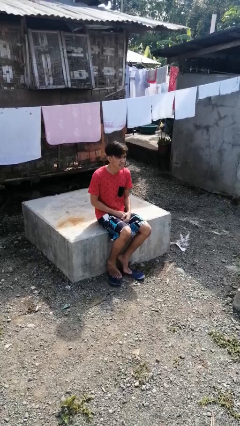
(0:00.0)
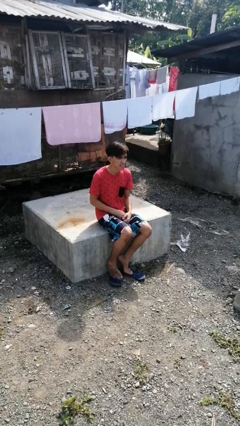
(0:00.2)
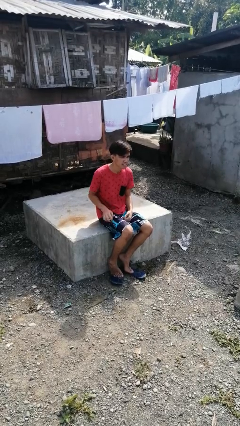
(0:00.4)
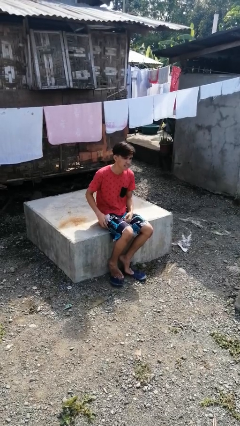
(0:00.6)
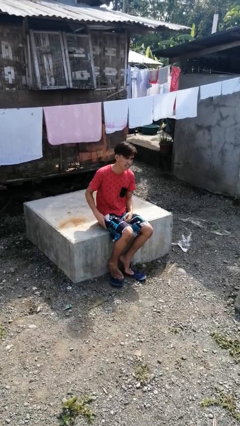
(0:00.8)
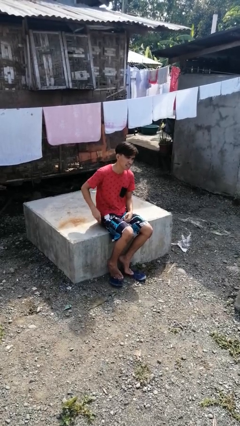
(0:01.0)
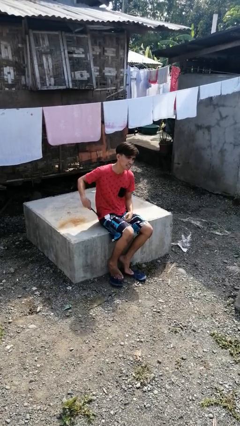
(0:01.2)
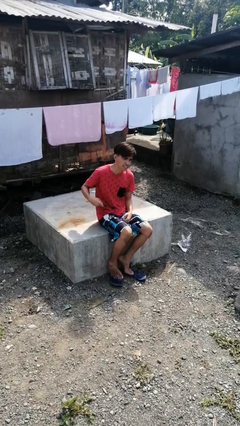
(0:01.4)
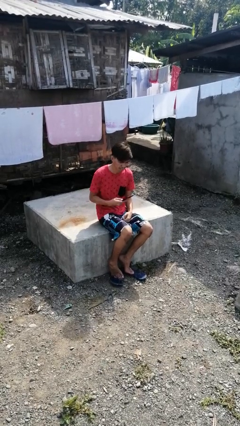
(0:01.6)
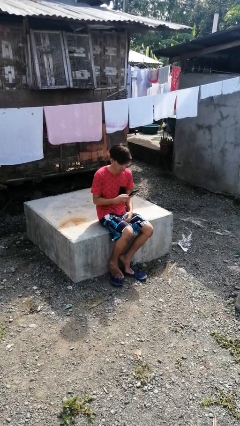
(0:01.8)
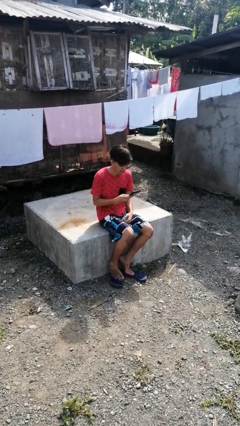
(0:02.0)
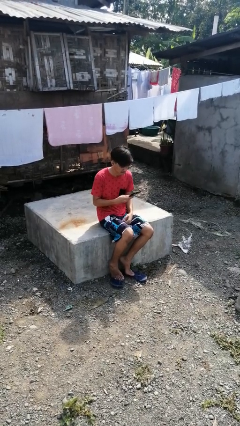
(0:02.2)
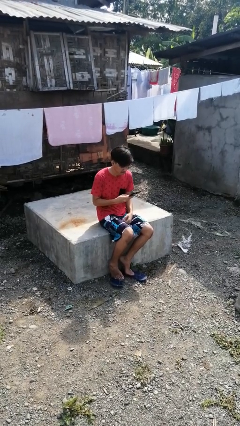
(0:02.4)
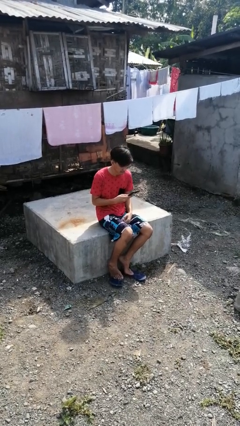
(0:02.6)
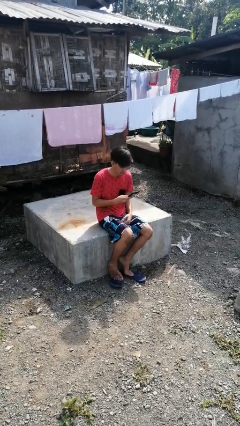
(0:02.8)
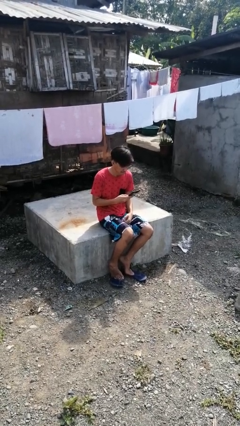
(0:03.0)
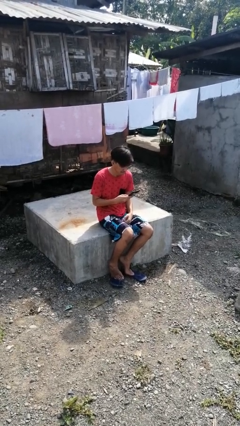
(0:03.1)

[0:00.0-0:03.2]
person takes phone from pocket

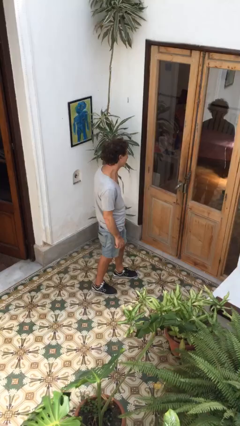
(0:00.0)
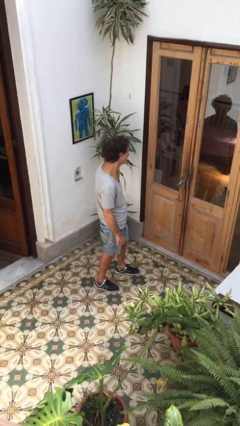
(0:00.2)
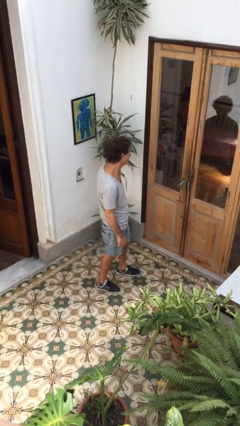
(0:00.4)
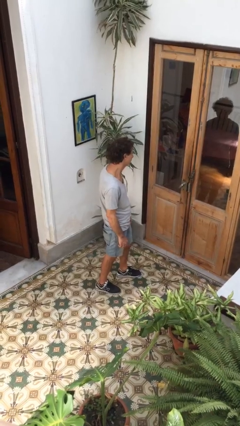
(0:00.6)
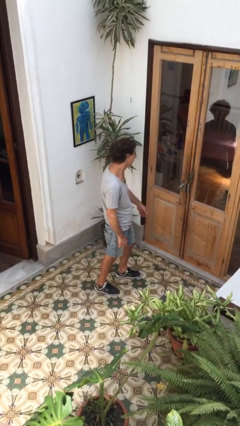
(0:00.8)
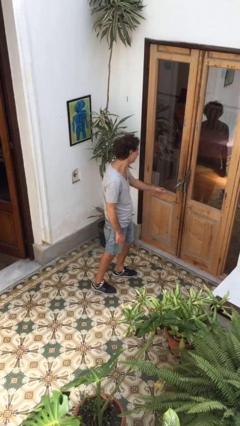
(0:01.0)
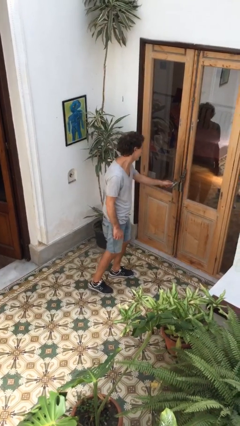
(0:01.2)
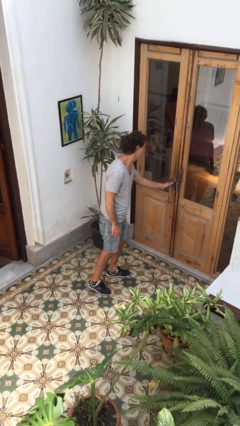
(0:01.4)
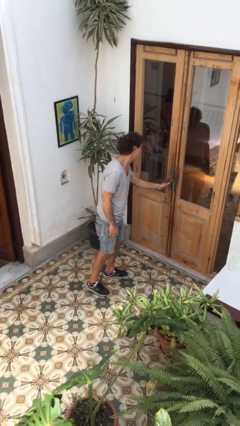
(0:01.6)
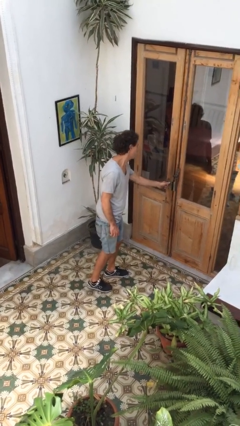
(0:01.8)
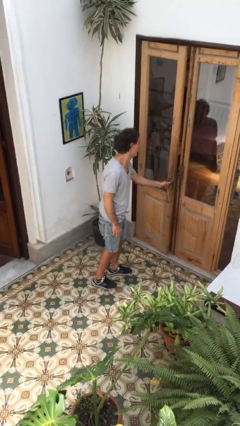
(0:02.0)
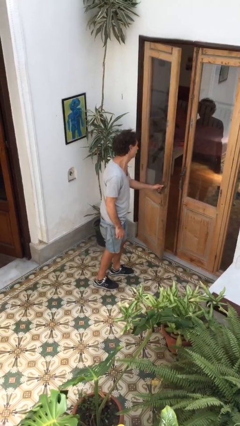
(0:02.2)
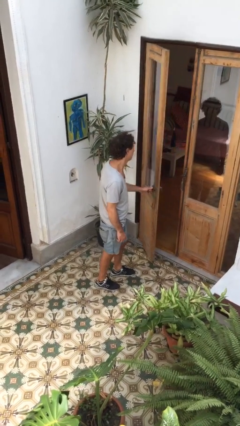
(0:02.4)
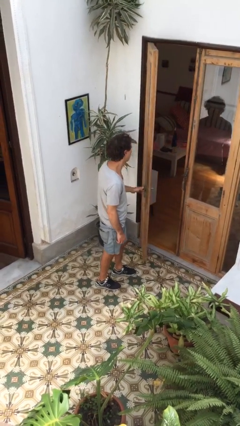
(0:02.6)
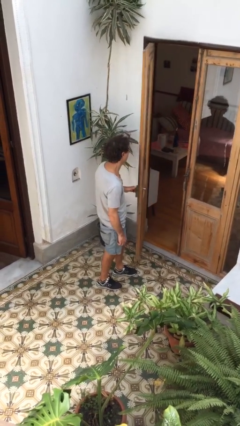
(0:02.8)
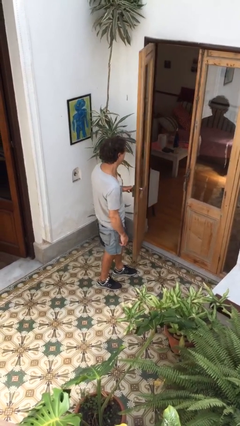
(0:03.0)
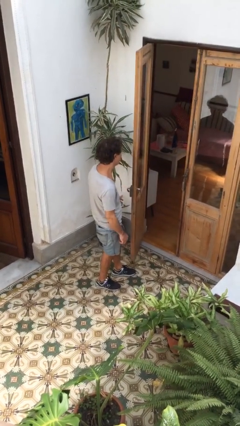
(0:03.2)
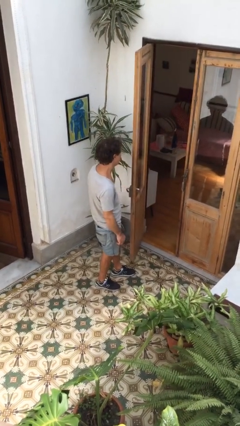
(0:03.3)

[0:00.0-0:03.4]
person opens facility door

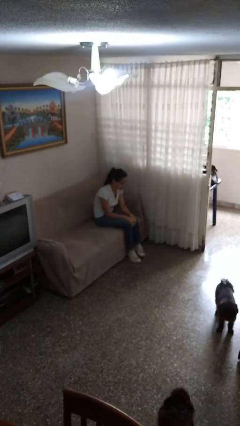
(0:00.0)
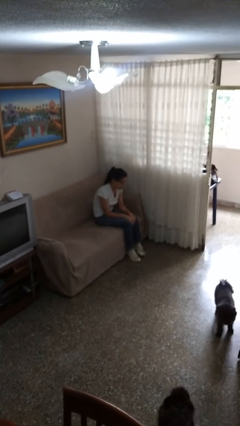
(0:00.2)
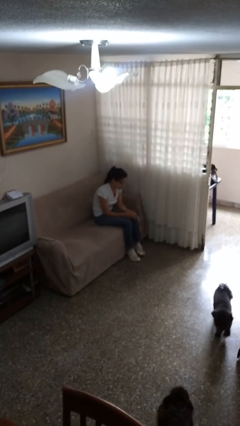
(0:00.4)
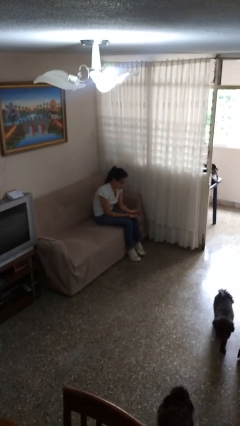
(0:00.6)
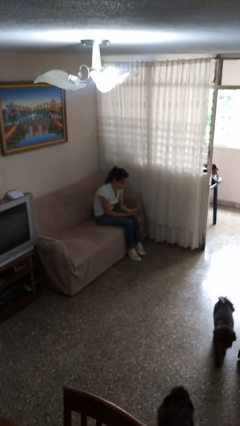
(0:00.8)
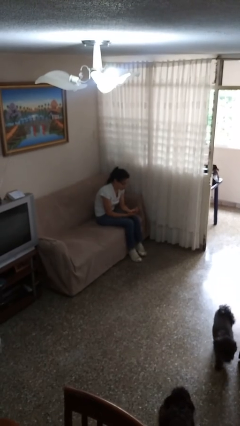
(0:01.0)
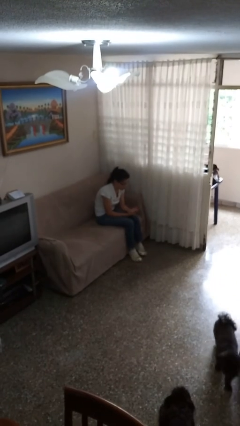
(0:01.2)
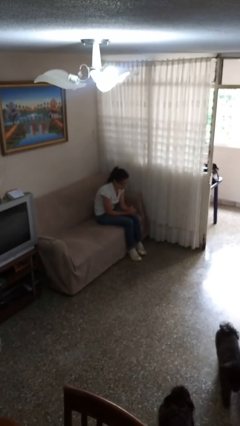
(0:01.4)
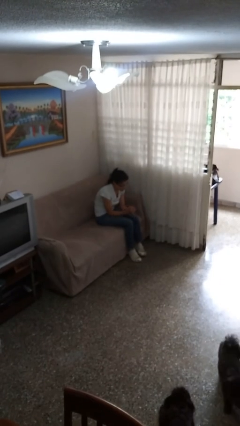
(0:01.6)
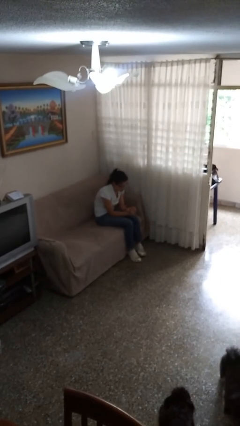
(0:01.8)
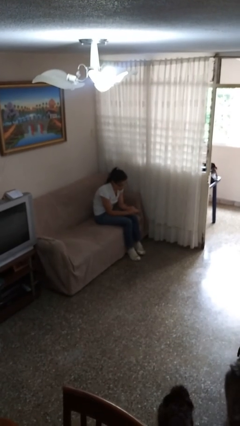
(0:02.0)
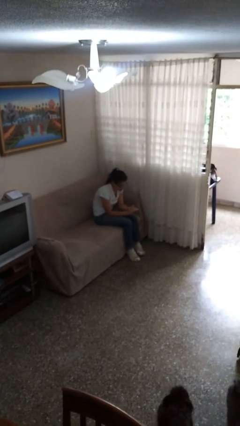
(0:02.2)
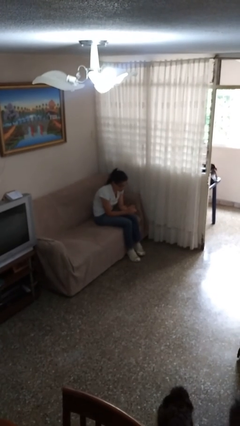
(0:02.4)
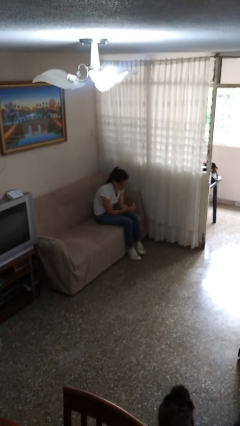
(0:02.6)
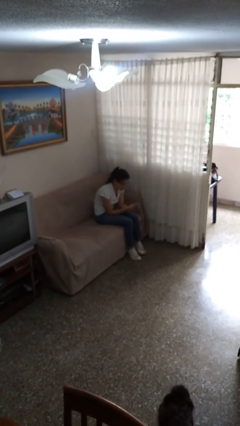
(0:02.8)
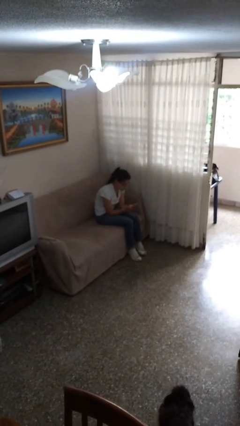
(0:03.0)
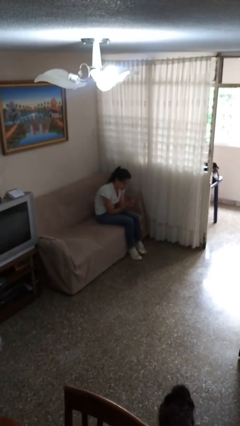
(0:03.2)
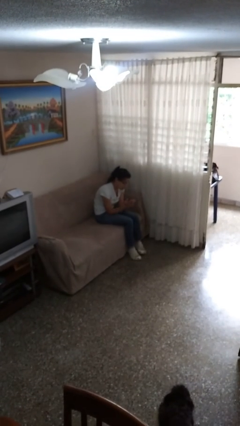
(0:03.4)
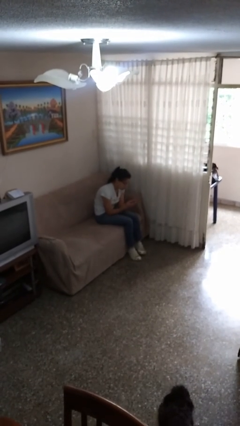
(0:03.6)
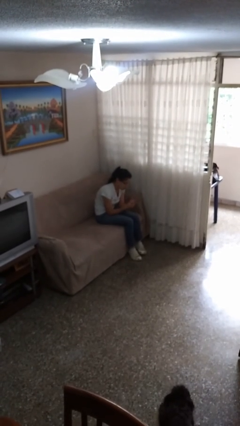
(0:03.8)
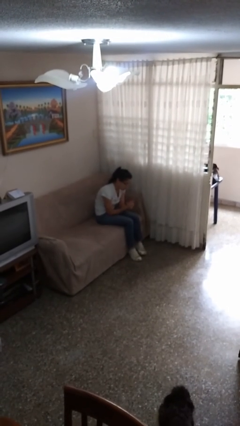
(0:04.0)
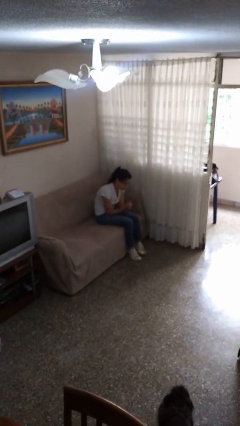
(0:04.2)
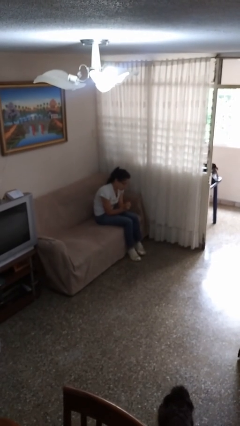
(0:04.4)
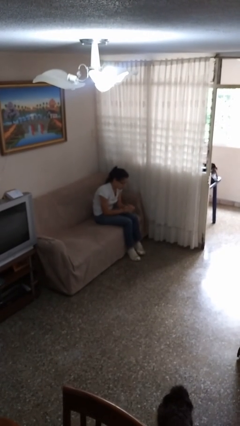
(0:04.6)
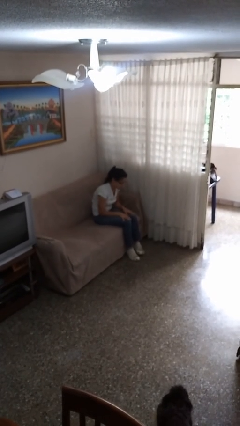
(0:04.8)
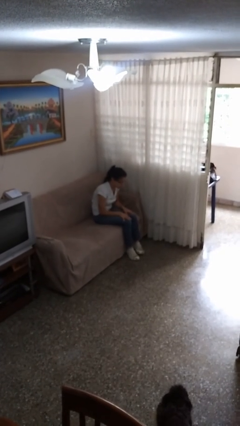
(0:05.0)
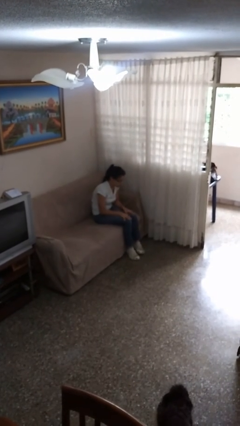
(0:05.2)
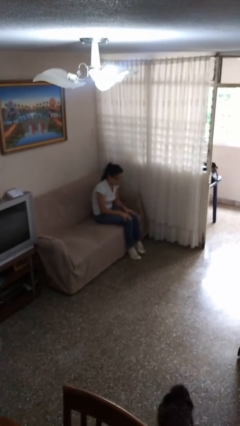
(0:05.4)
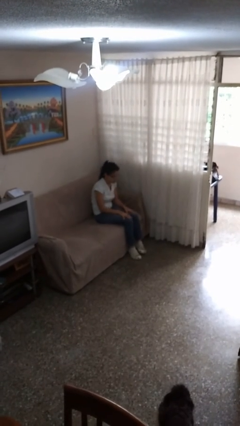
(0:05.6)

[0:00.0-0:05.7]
person looks at hands in lap

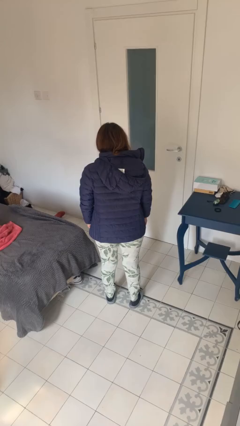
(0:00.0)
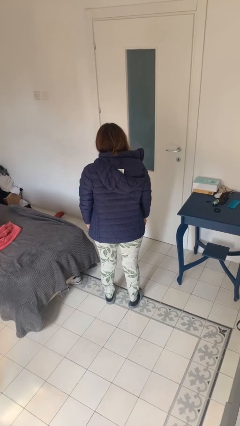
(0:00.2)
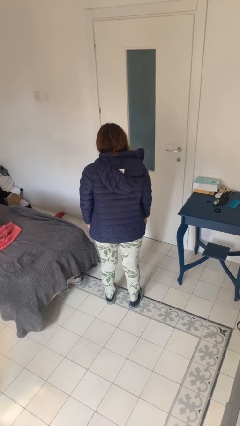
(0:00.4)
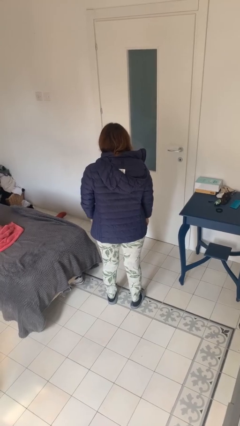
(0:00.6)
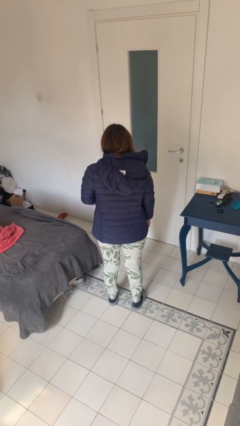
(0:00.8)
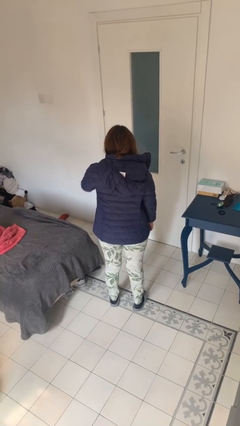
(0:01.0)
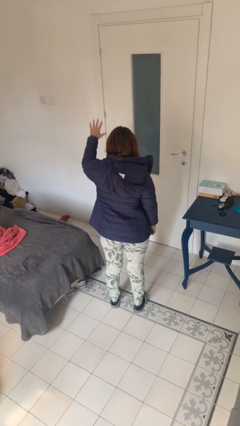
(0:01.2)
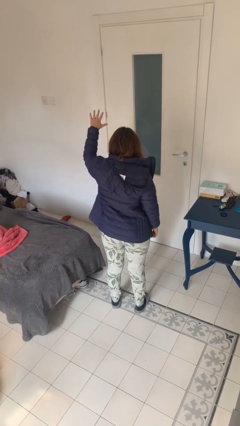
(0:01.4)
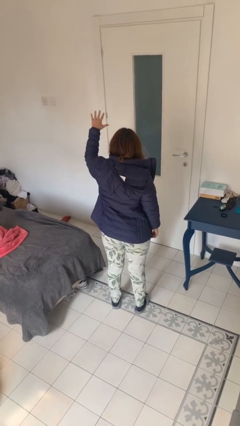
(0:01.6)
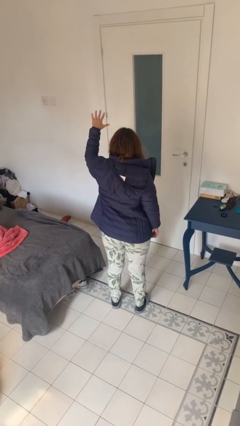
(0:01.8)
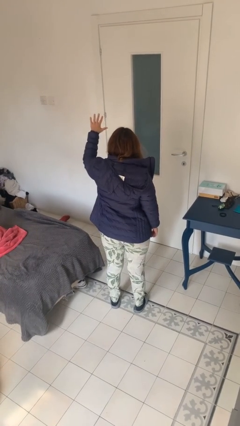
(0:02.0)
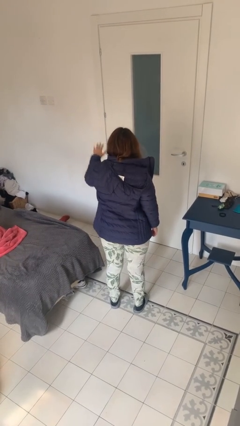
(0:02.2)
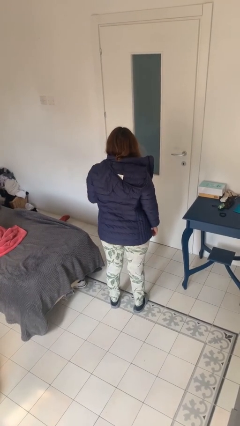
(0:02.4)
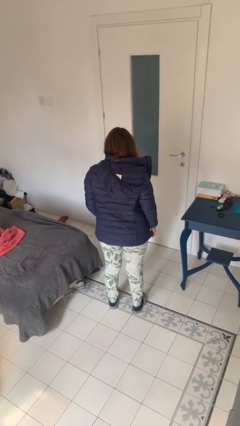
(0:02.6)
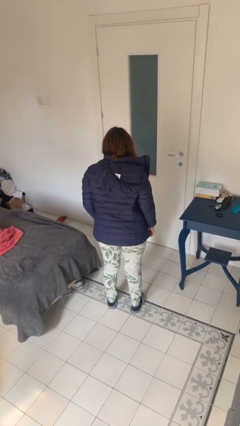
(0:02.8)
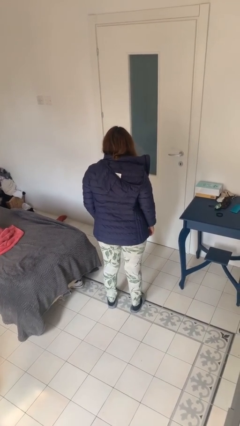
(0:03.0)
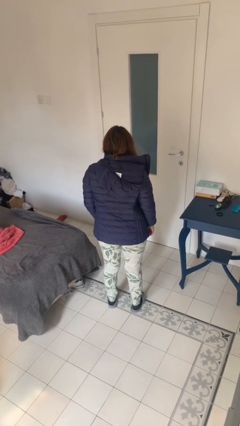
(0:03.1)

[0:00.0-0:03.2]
person gestures number five

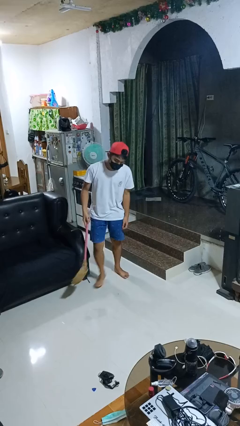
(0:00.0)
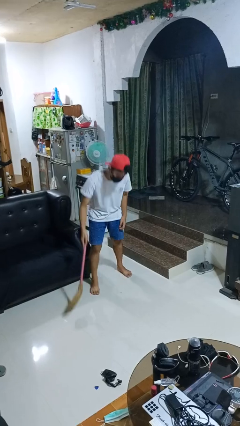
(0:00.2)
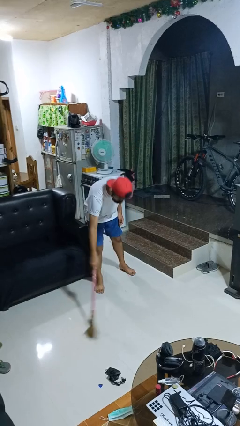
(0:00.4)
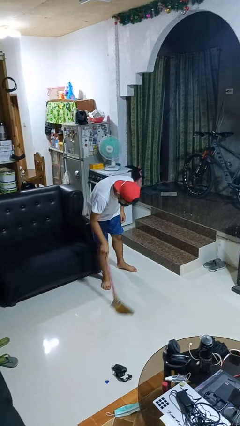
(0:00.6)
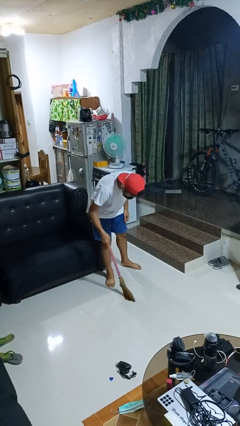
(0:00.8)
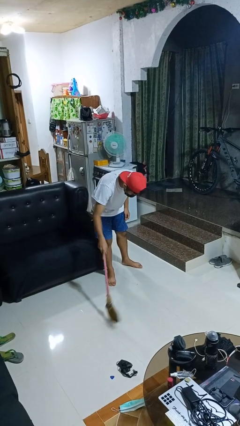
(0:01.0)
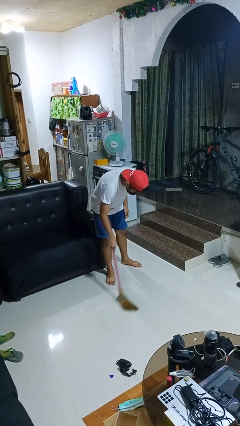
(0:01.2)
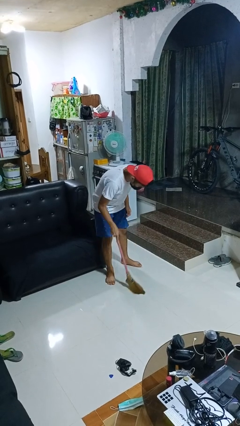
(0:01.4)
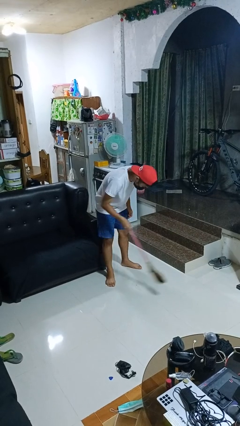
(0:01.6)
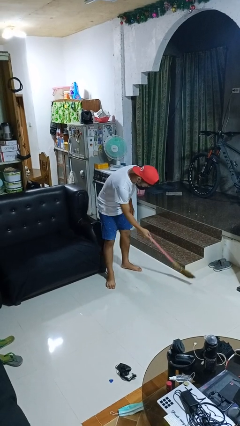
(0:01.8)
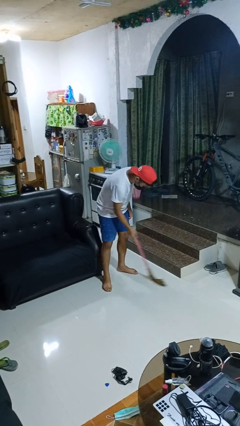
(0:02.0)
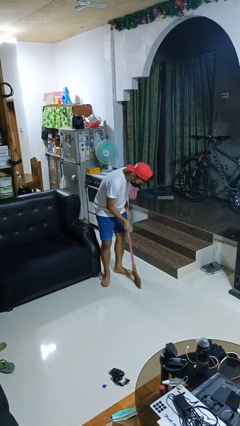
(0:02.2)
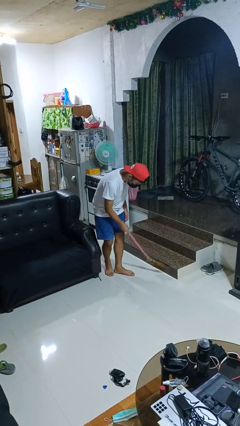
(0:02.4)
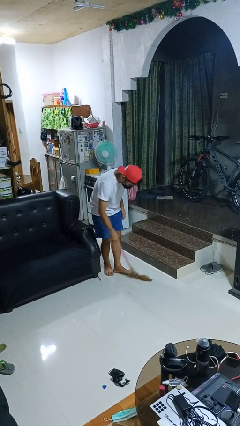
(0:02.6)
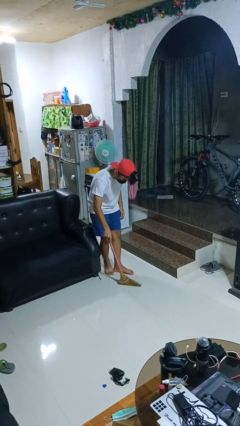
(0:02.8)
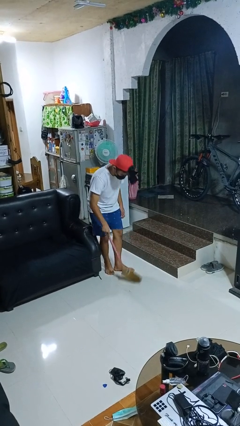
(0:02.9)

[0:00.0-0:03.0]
person sweeps floor
